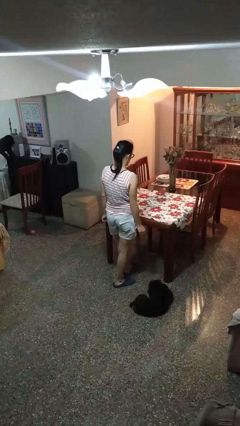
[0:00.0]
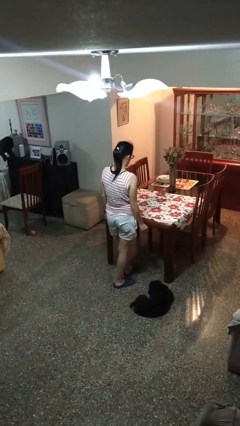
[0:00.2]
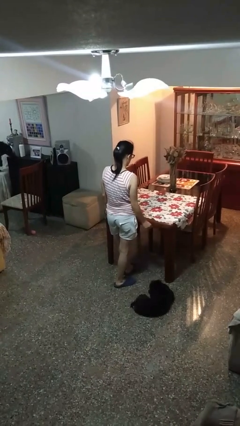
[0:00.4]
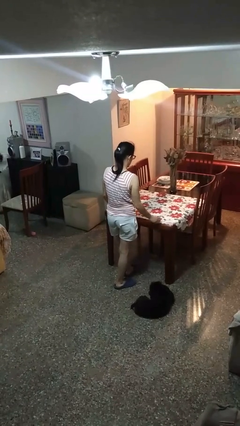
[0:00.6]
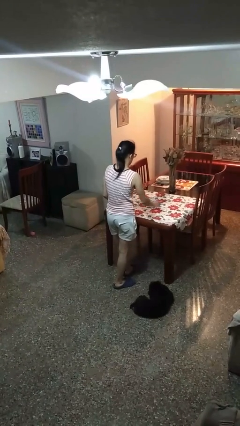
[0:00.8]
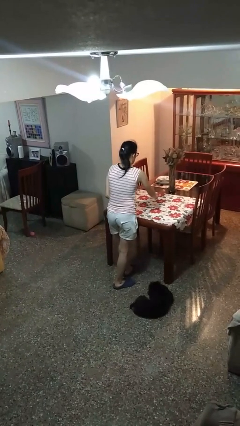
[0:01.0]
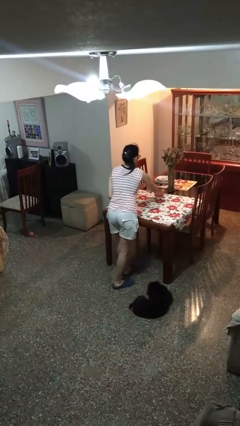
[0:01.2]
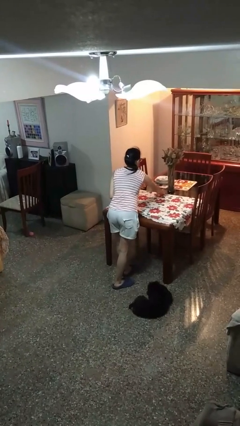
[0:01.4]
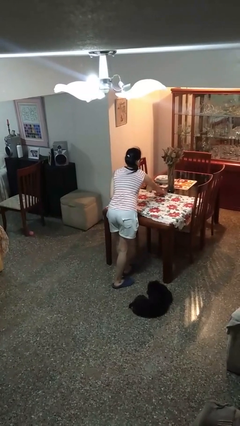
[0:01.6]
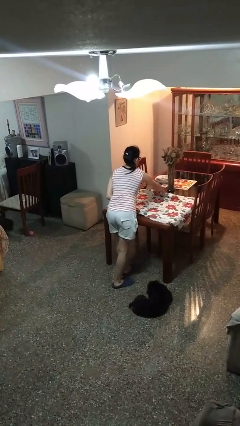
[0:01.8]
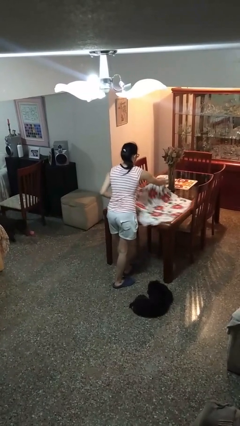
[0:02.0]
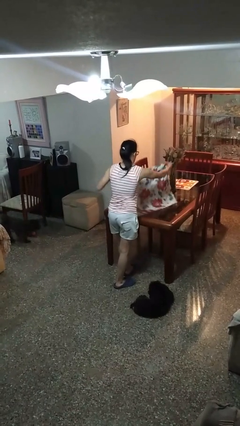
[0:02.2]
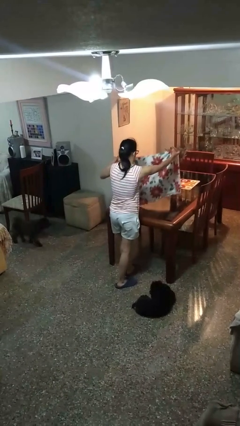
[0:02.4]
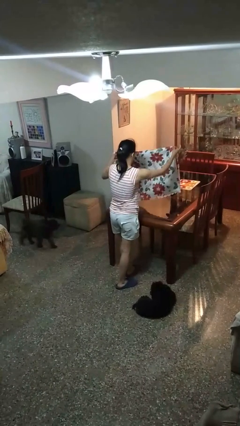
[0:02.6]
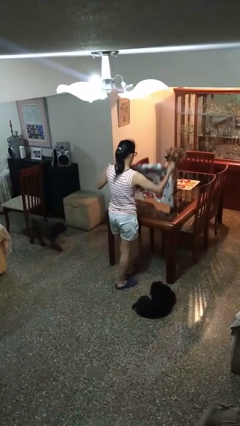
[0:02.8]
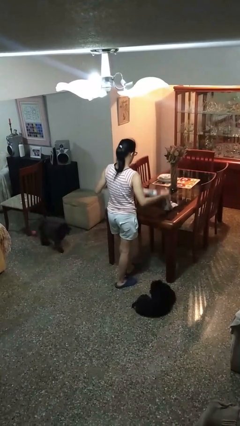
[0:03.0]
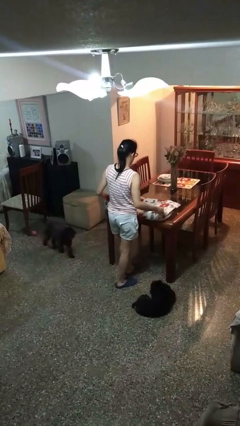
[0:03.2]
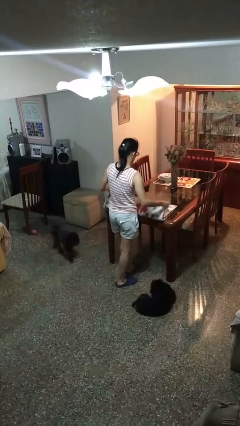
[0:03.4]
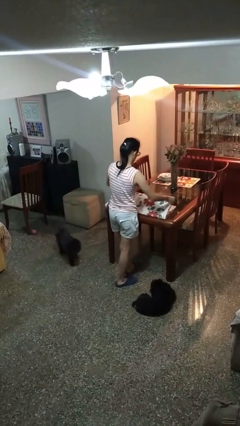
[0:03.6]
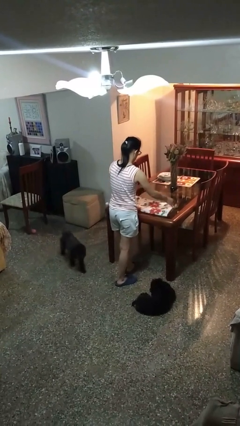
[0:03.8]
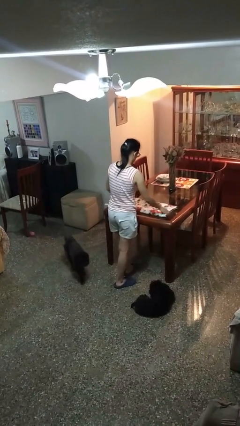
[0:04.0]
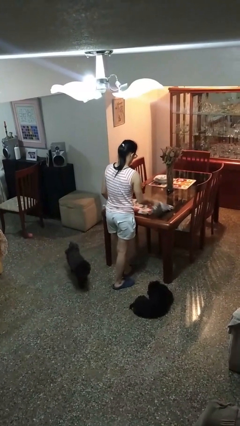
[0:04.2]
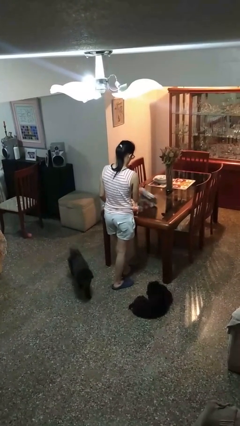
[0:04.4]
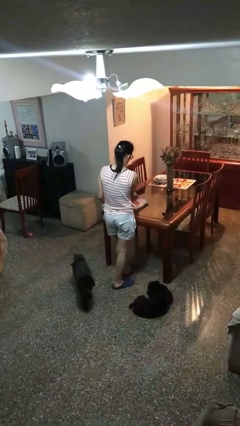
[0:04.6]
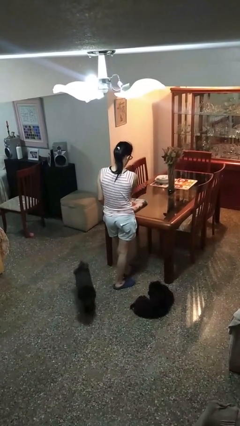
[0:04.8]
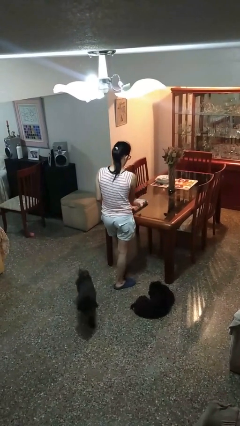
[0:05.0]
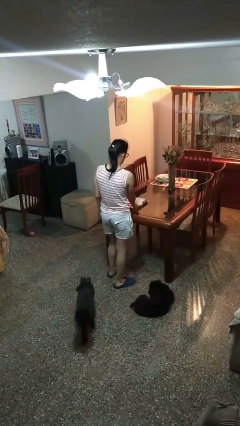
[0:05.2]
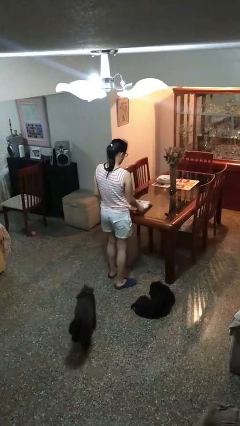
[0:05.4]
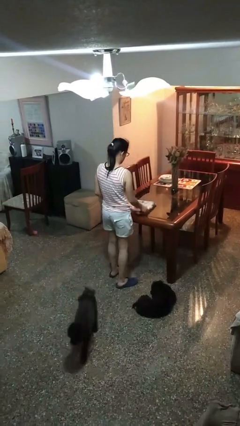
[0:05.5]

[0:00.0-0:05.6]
person folds tablecloth

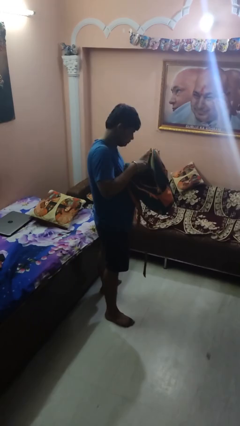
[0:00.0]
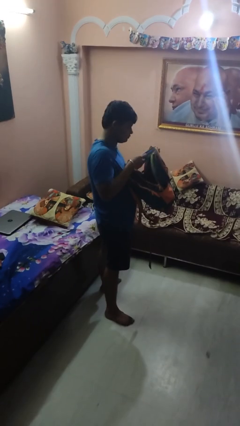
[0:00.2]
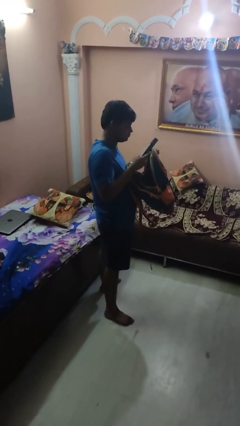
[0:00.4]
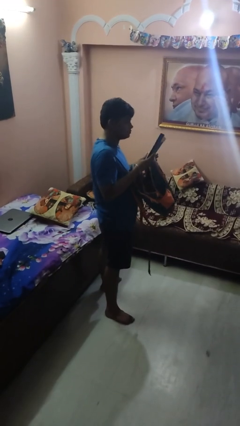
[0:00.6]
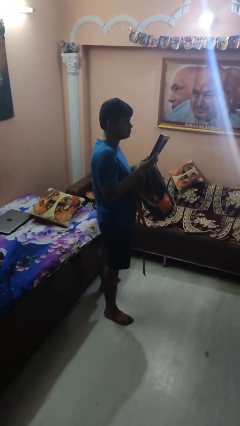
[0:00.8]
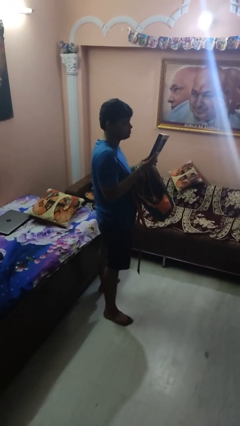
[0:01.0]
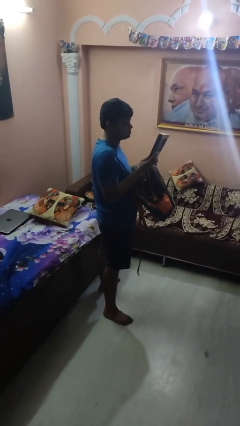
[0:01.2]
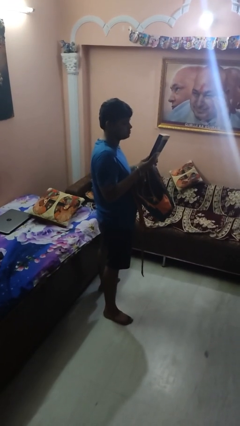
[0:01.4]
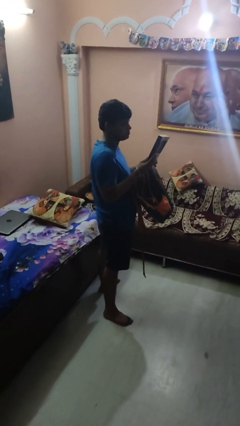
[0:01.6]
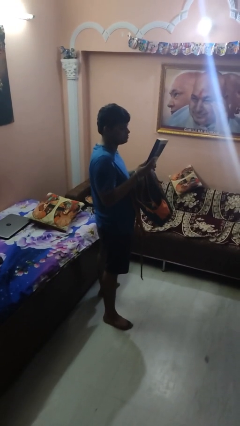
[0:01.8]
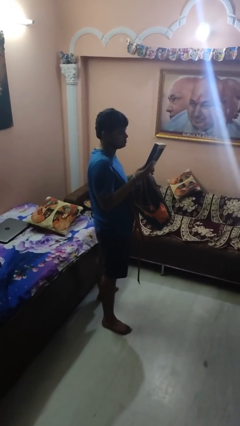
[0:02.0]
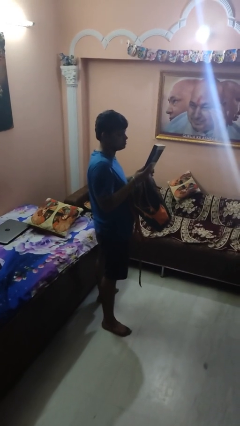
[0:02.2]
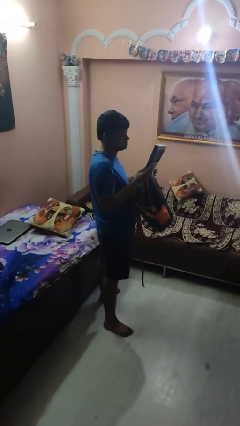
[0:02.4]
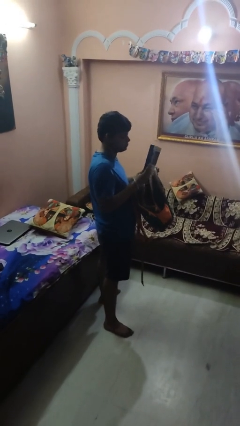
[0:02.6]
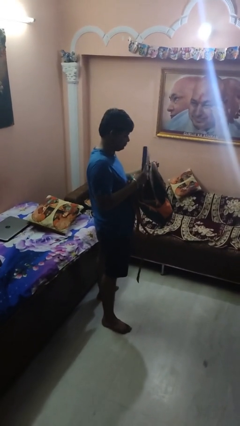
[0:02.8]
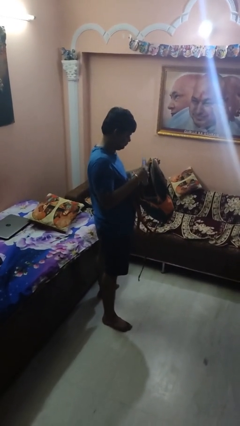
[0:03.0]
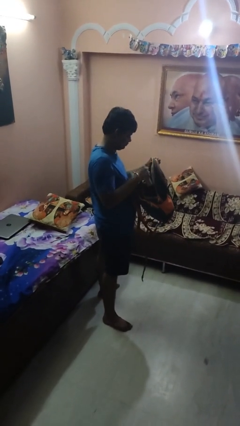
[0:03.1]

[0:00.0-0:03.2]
person takes object from backpack

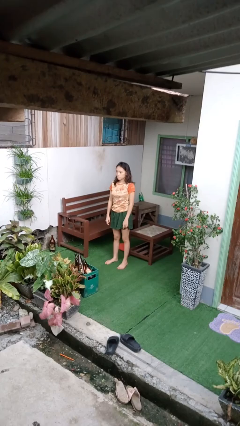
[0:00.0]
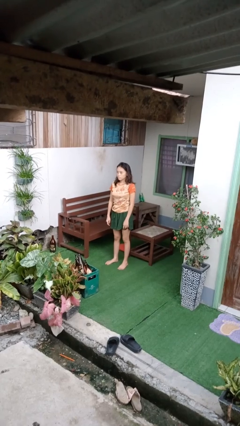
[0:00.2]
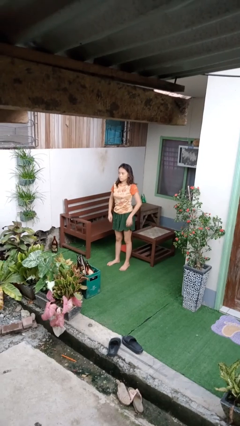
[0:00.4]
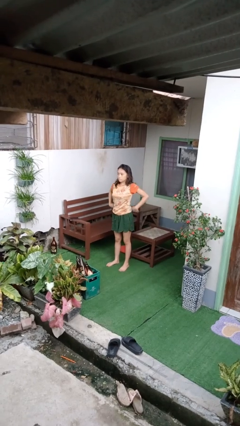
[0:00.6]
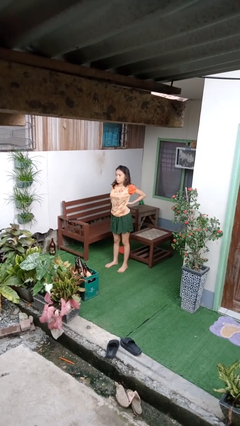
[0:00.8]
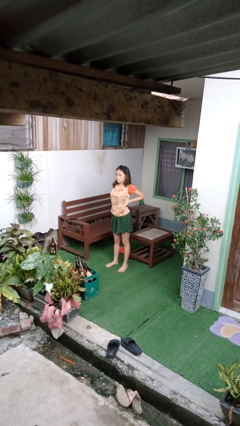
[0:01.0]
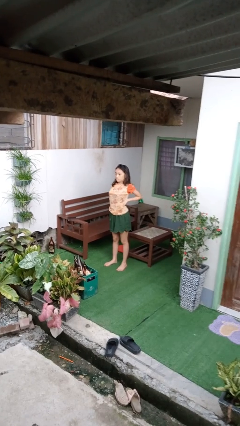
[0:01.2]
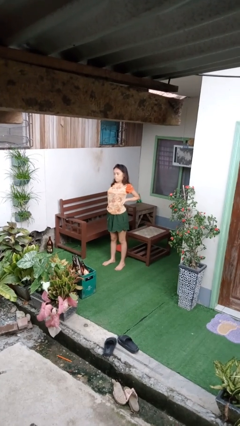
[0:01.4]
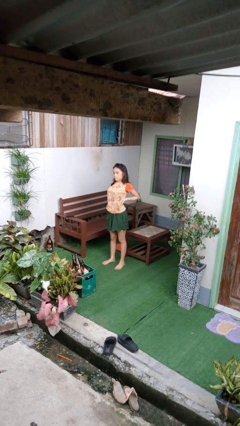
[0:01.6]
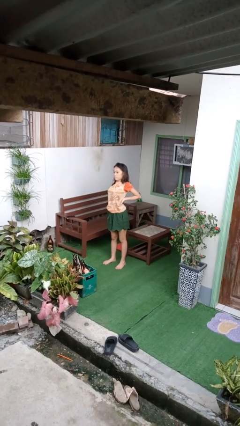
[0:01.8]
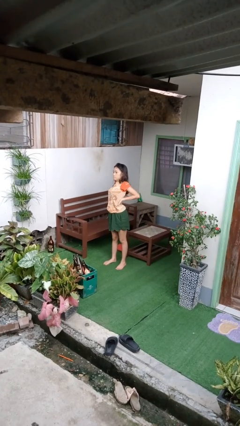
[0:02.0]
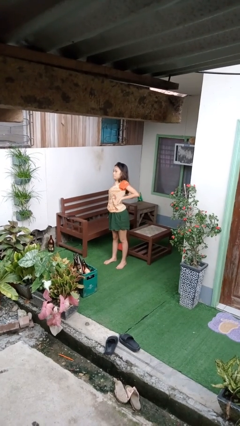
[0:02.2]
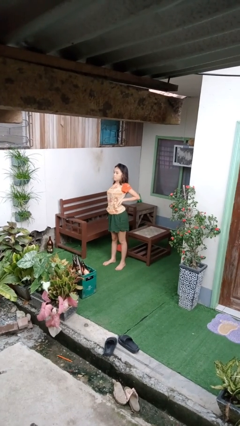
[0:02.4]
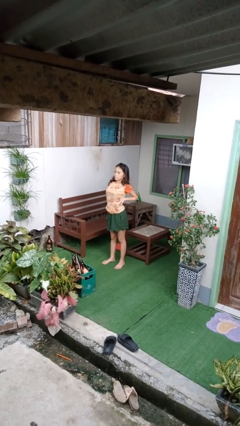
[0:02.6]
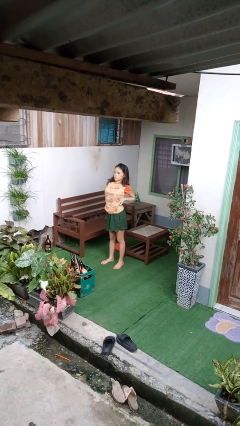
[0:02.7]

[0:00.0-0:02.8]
person stretches back

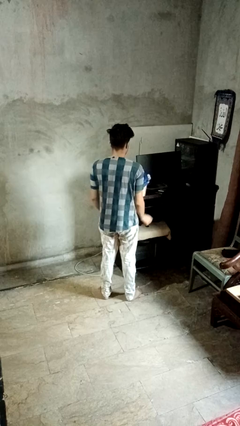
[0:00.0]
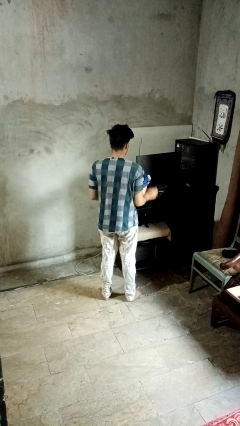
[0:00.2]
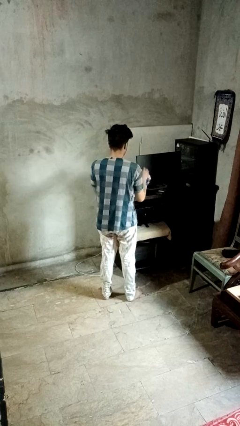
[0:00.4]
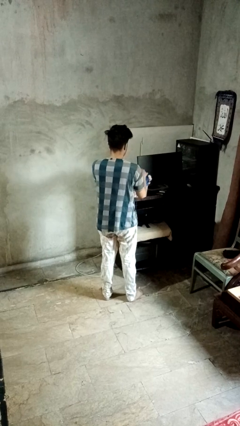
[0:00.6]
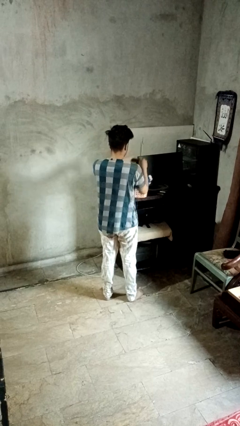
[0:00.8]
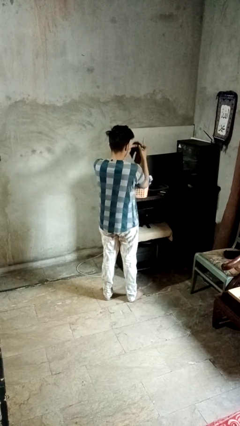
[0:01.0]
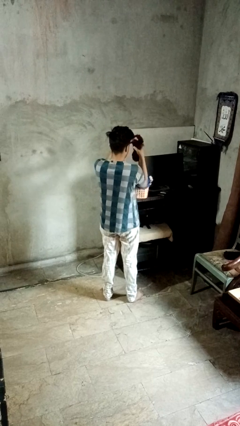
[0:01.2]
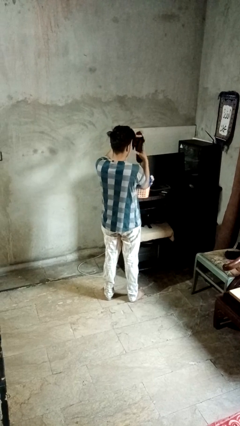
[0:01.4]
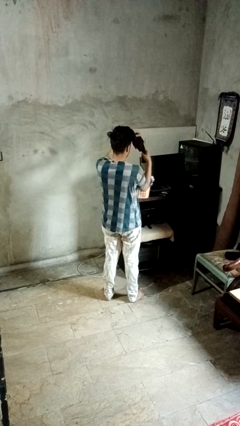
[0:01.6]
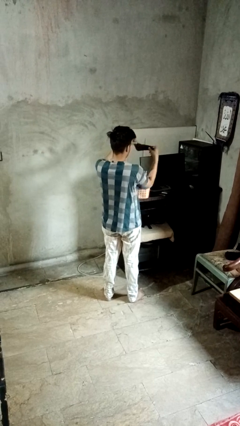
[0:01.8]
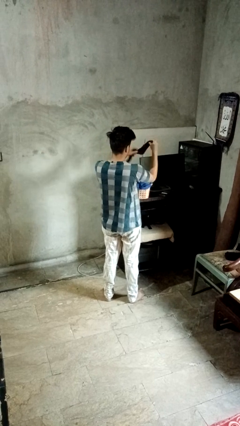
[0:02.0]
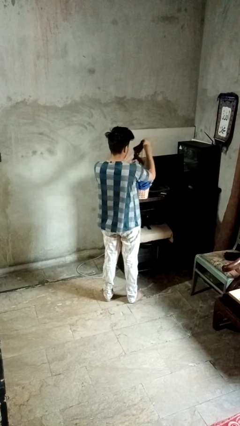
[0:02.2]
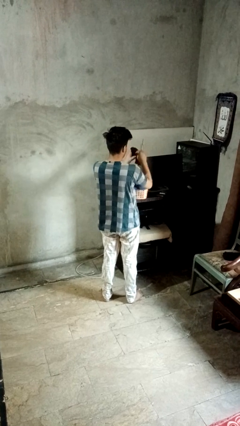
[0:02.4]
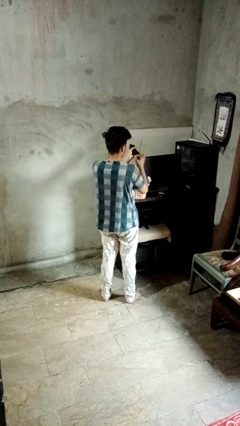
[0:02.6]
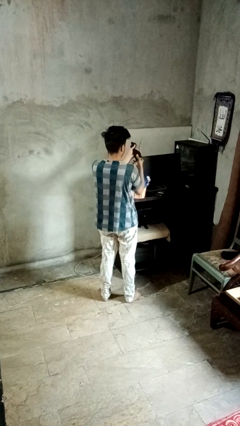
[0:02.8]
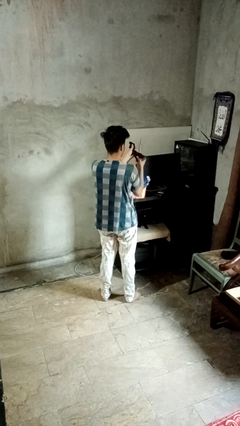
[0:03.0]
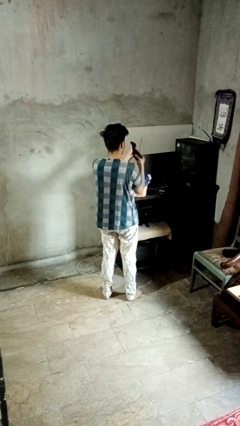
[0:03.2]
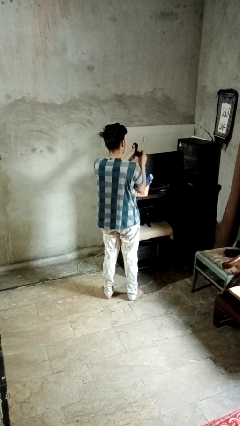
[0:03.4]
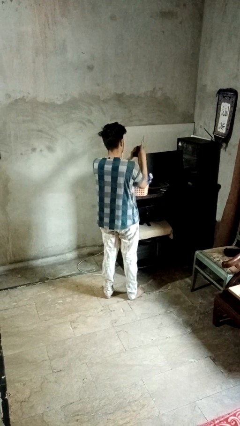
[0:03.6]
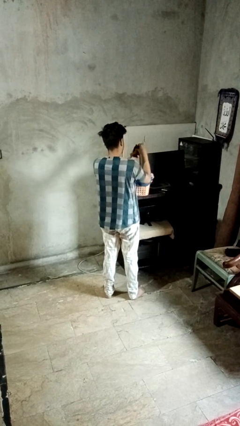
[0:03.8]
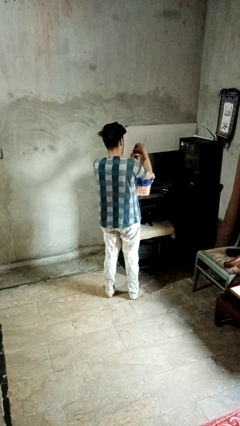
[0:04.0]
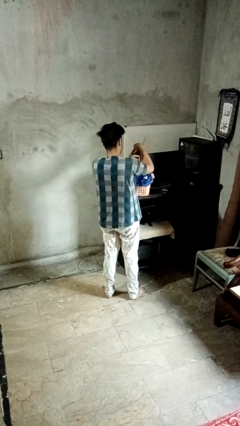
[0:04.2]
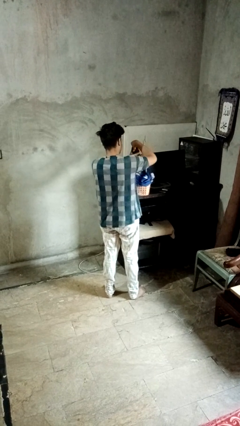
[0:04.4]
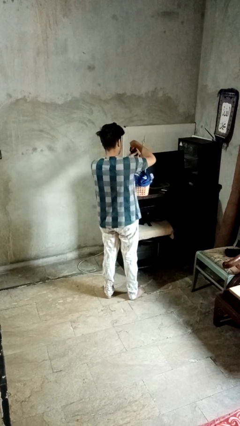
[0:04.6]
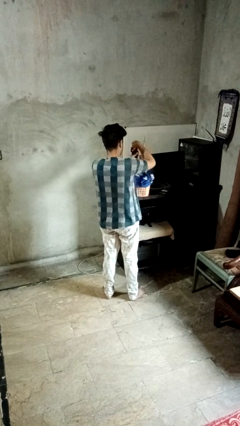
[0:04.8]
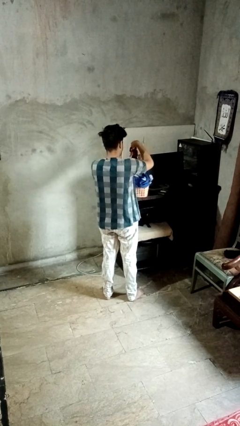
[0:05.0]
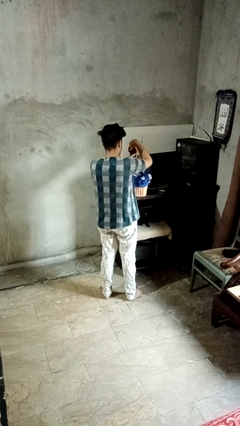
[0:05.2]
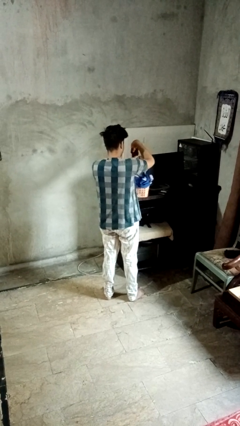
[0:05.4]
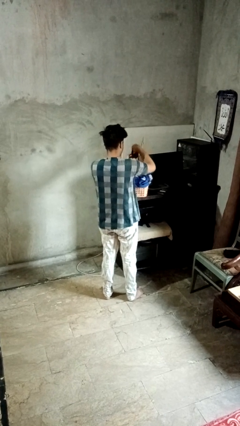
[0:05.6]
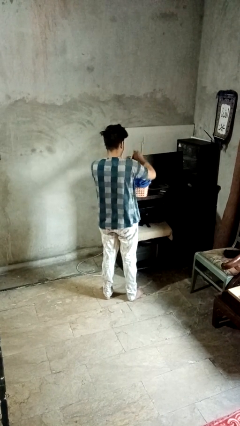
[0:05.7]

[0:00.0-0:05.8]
person folds socks

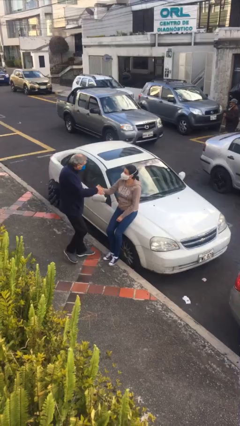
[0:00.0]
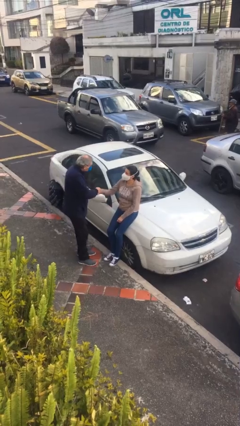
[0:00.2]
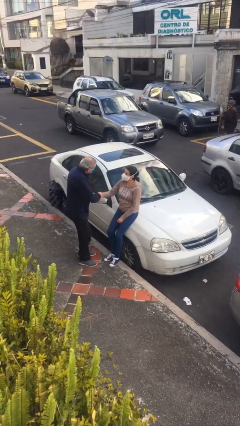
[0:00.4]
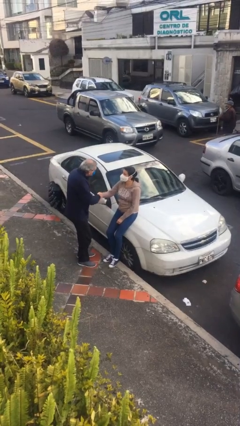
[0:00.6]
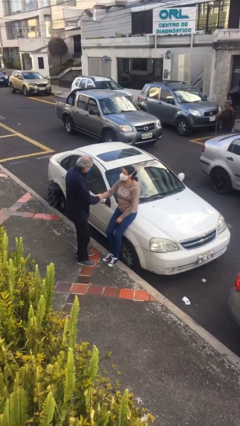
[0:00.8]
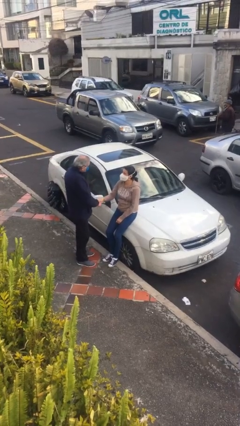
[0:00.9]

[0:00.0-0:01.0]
person shakes hand
